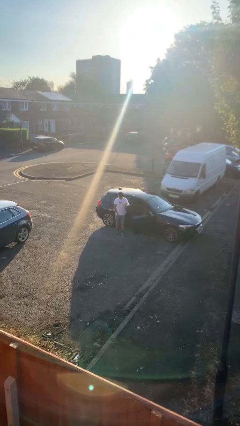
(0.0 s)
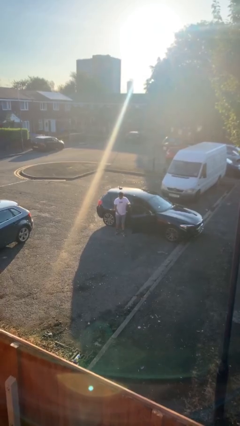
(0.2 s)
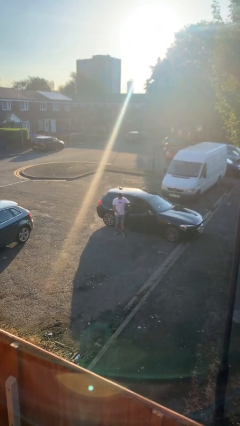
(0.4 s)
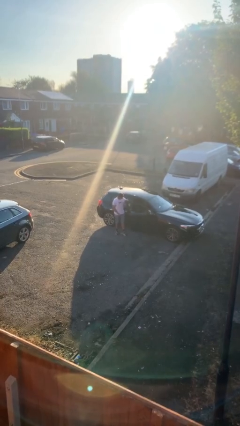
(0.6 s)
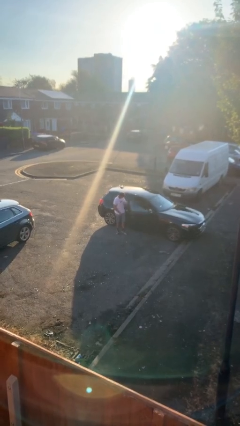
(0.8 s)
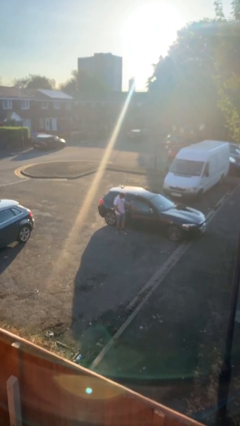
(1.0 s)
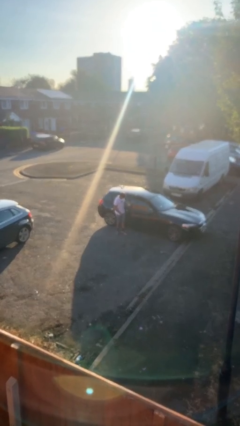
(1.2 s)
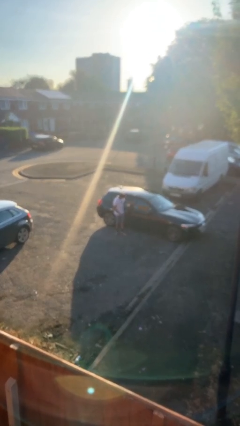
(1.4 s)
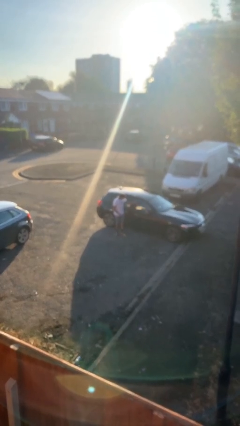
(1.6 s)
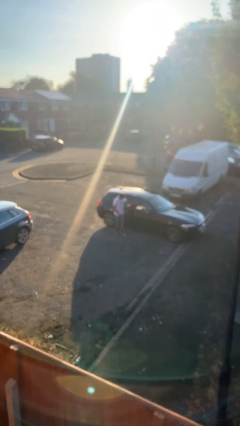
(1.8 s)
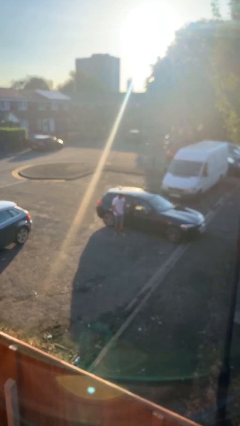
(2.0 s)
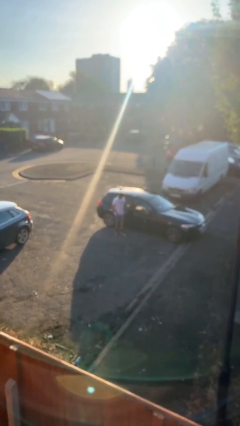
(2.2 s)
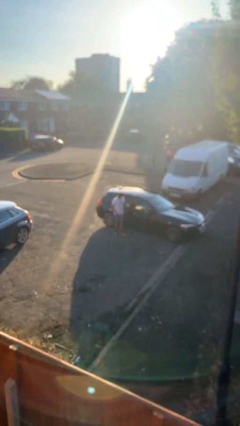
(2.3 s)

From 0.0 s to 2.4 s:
person closes car door

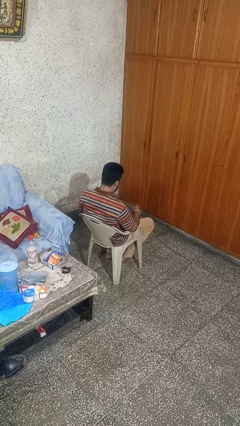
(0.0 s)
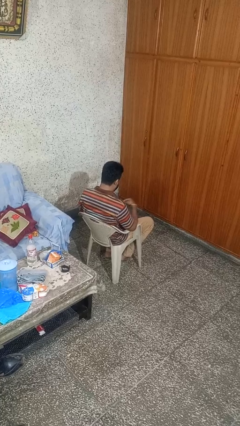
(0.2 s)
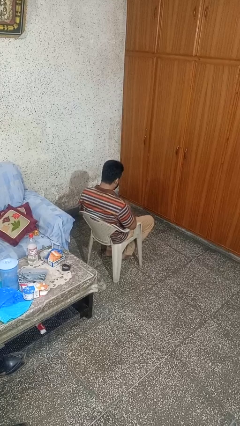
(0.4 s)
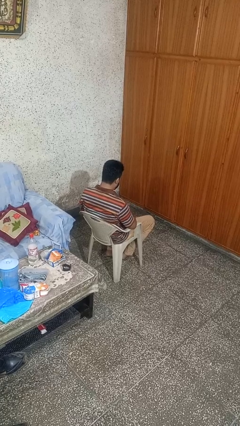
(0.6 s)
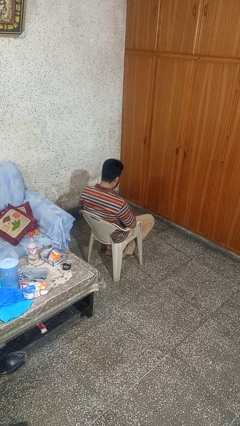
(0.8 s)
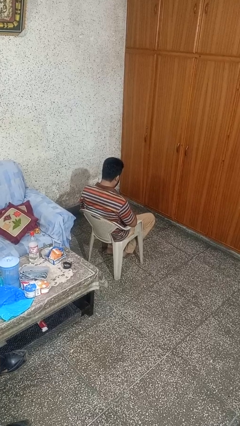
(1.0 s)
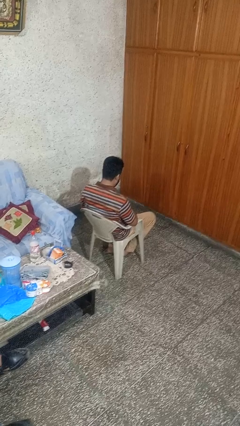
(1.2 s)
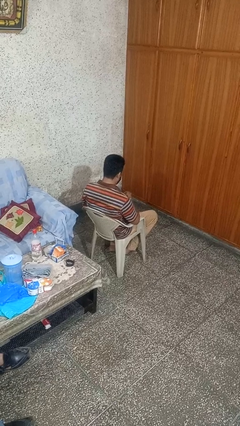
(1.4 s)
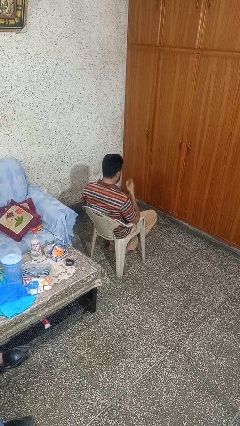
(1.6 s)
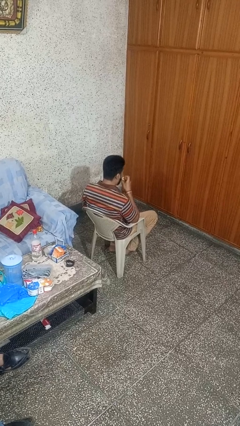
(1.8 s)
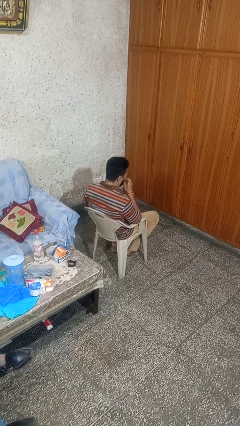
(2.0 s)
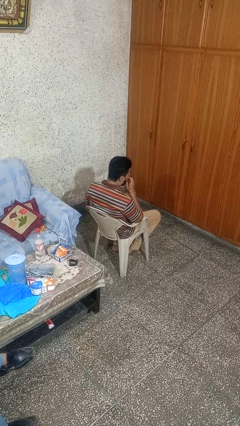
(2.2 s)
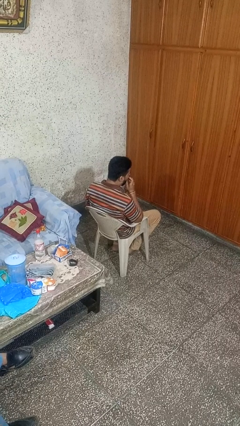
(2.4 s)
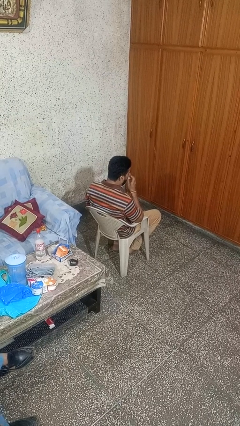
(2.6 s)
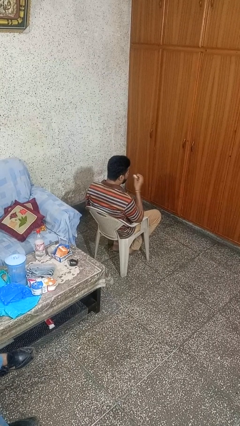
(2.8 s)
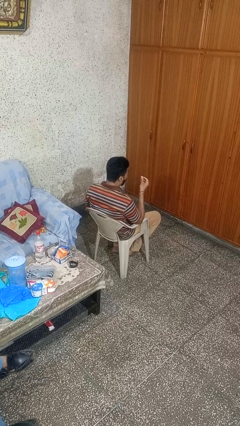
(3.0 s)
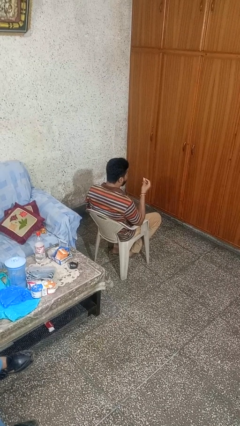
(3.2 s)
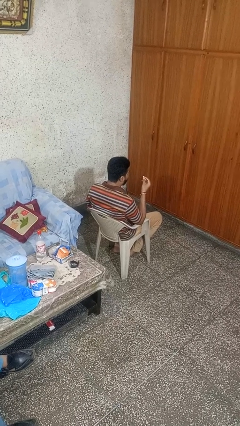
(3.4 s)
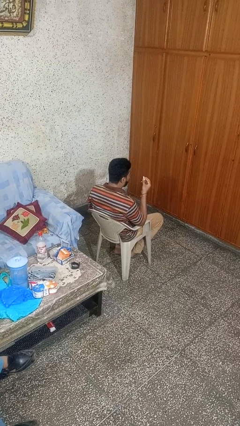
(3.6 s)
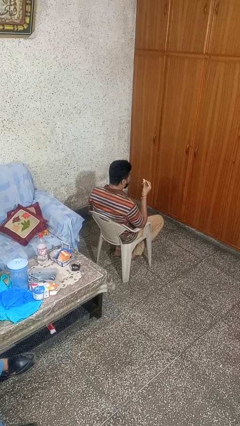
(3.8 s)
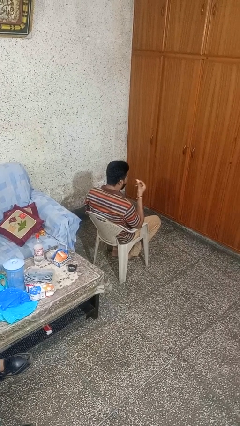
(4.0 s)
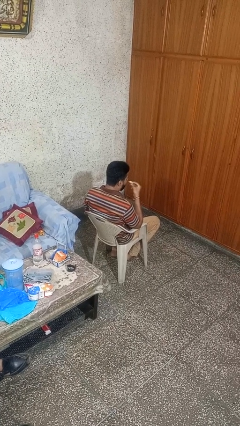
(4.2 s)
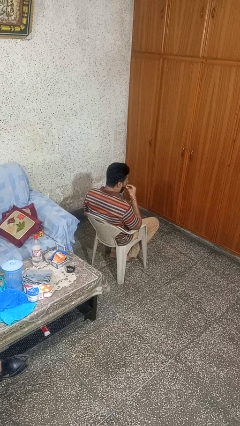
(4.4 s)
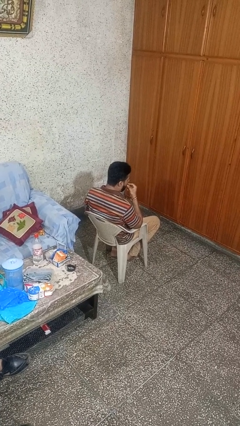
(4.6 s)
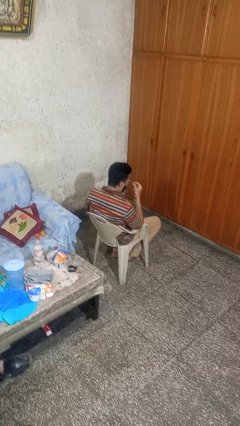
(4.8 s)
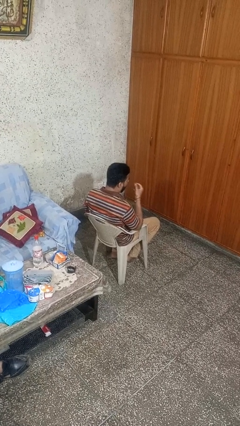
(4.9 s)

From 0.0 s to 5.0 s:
person eats snack from bag

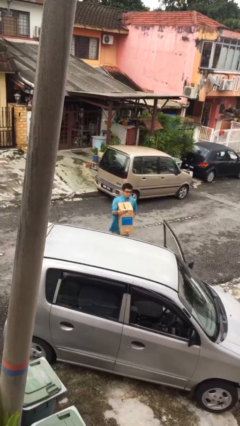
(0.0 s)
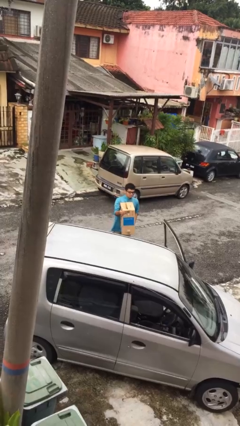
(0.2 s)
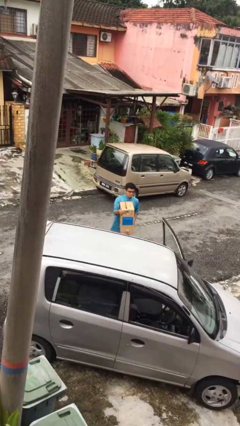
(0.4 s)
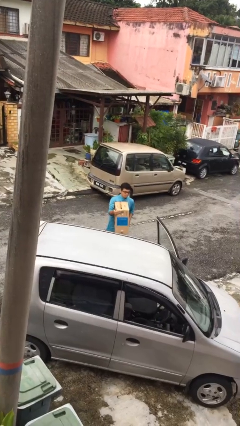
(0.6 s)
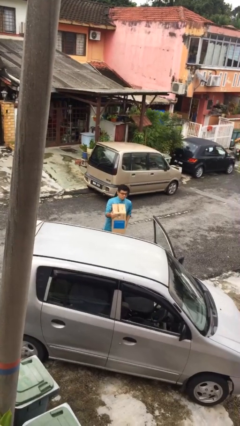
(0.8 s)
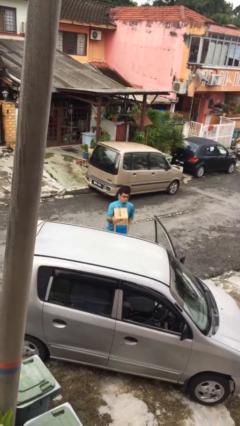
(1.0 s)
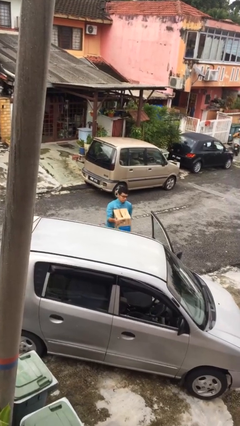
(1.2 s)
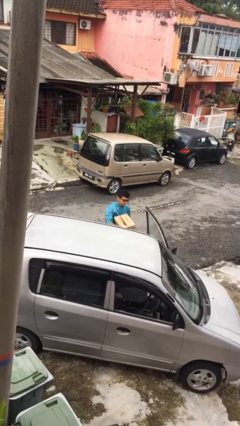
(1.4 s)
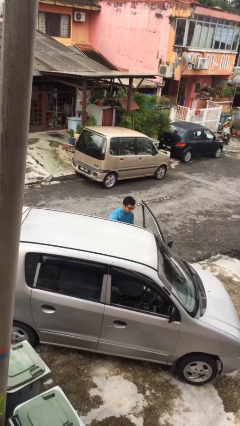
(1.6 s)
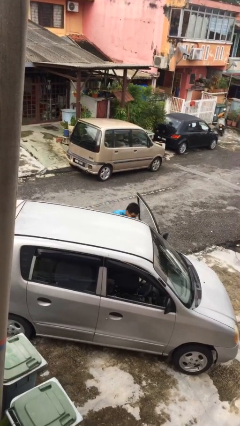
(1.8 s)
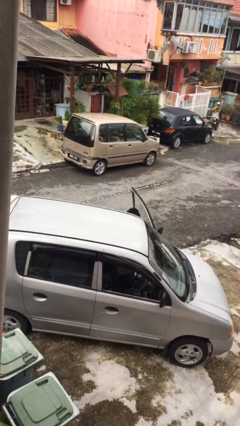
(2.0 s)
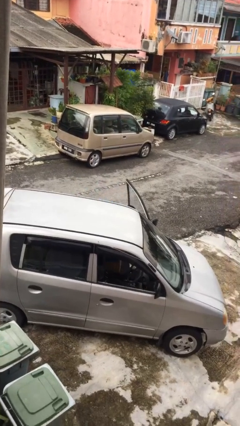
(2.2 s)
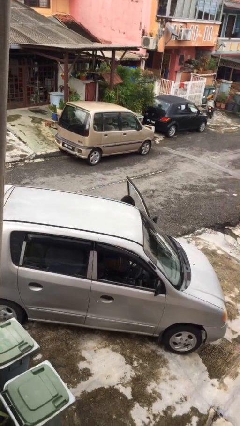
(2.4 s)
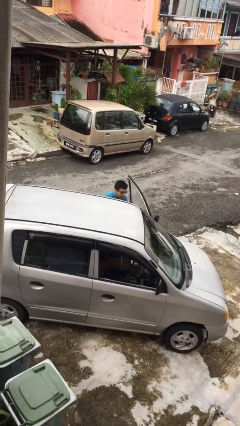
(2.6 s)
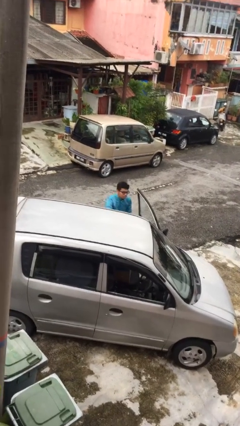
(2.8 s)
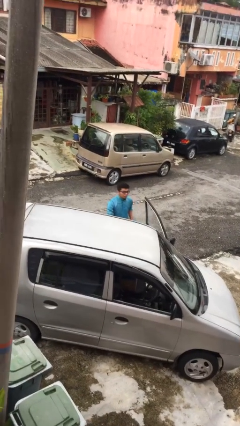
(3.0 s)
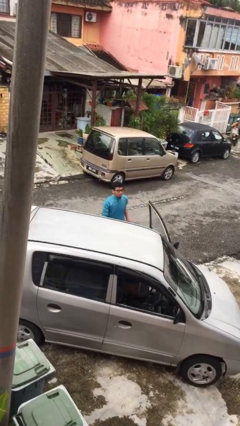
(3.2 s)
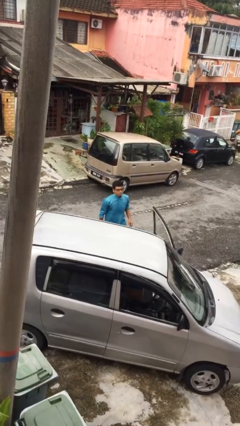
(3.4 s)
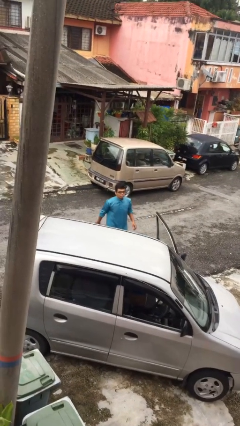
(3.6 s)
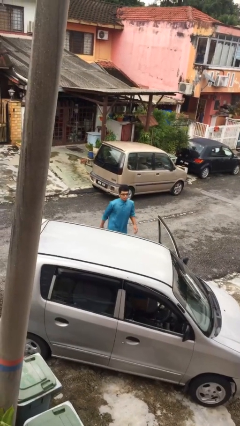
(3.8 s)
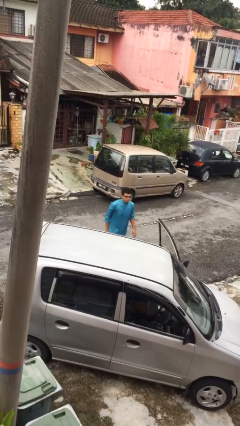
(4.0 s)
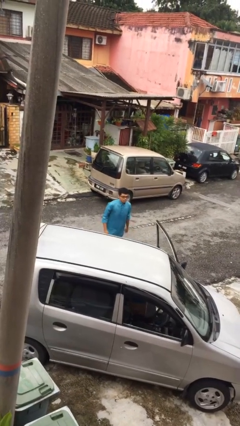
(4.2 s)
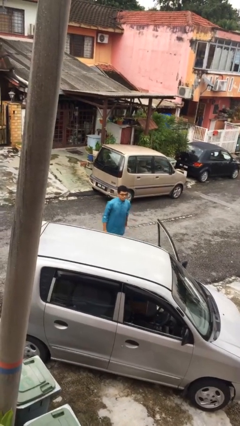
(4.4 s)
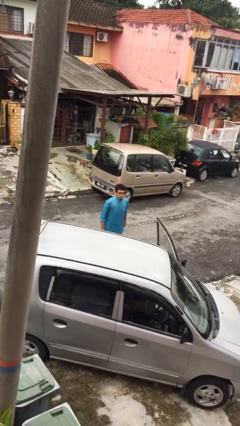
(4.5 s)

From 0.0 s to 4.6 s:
person loads car

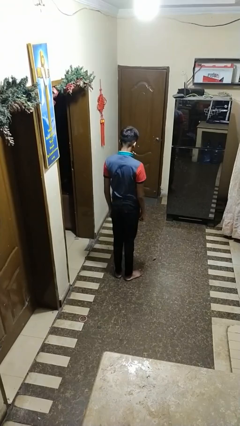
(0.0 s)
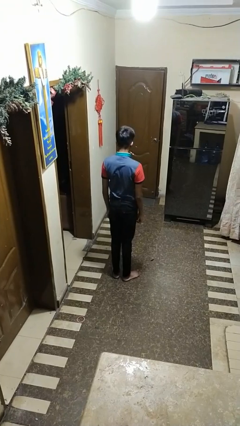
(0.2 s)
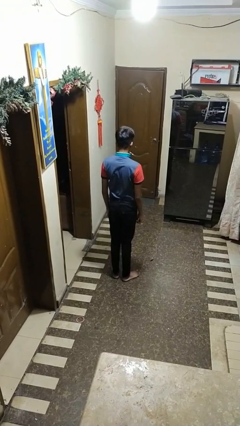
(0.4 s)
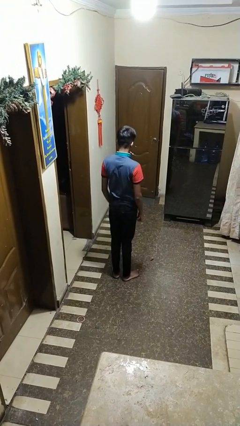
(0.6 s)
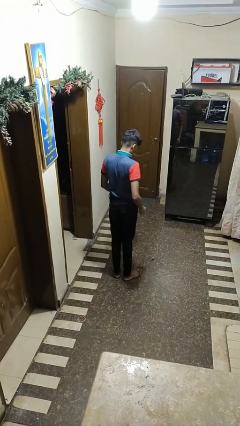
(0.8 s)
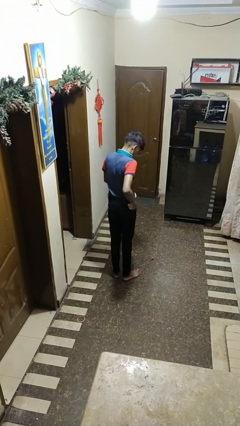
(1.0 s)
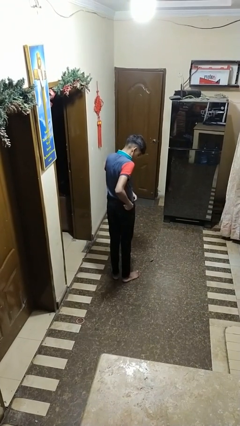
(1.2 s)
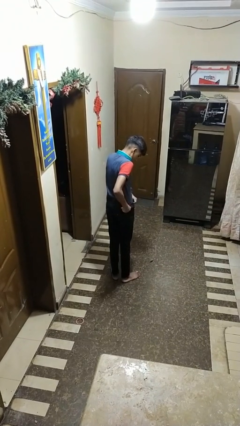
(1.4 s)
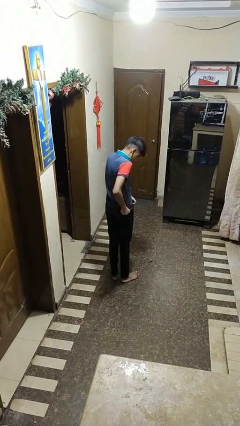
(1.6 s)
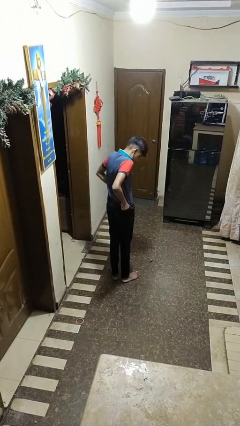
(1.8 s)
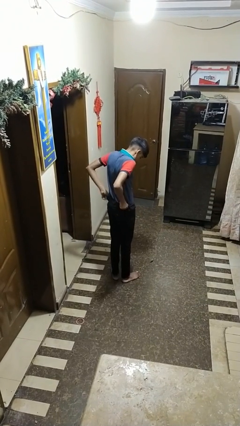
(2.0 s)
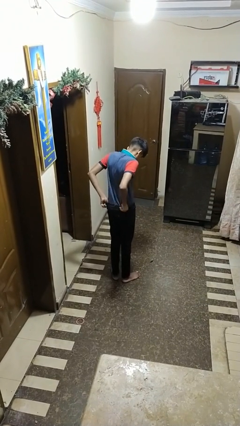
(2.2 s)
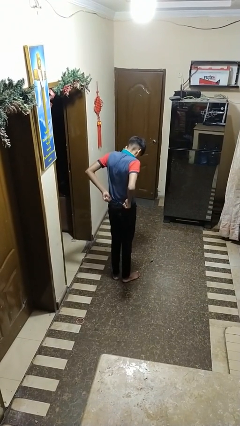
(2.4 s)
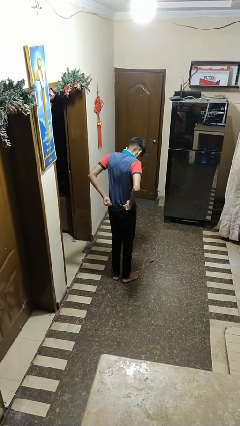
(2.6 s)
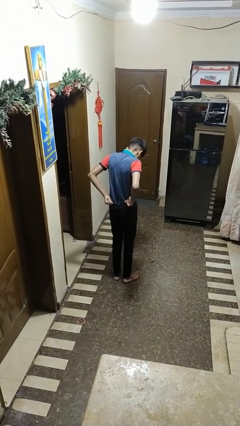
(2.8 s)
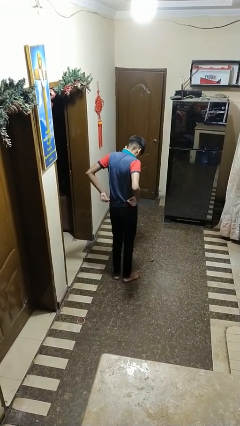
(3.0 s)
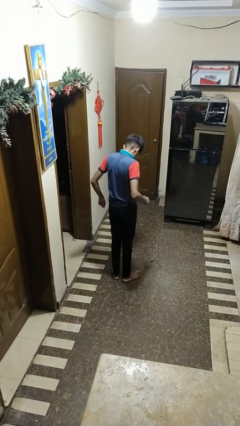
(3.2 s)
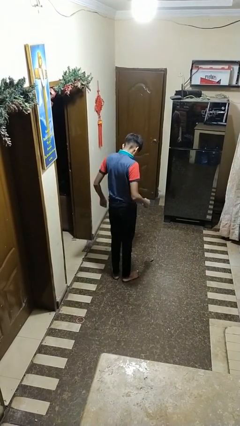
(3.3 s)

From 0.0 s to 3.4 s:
person hikes up pants

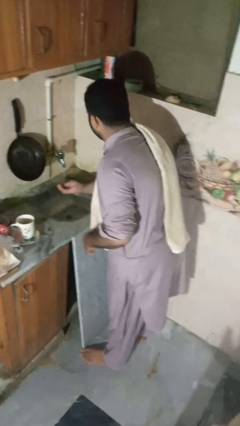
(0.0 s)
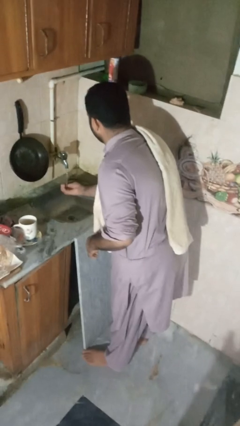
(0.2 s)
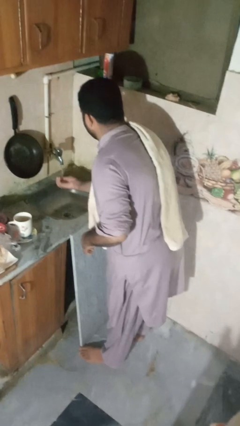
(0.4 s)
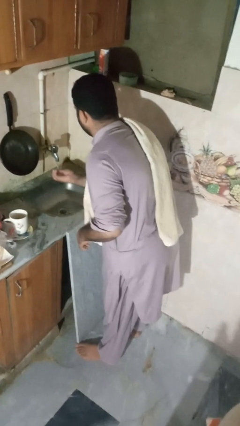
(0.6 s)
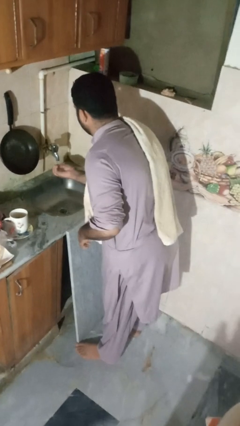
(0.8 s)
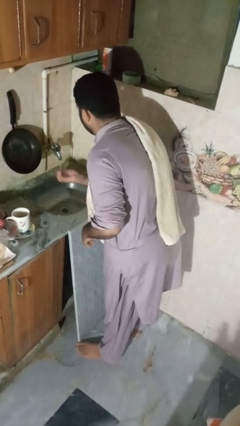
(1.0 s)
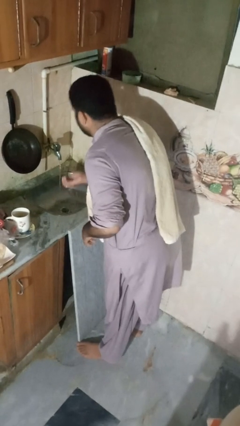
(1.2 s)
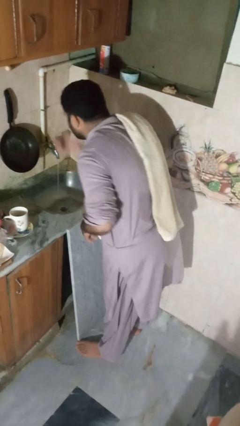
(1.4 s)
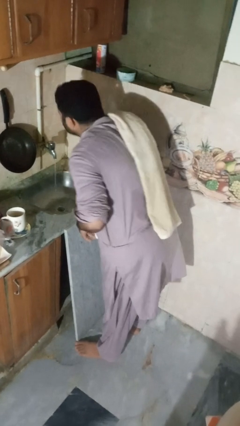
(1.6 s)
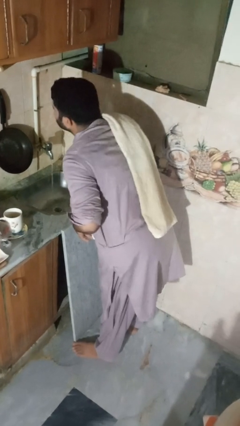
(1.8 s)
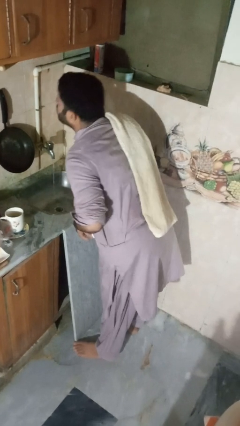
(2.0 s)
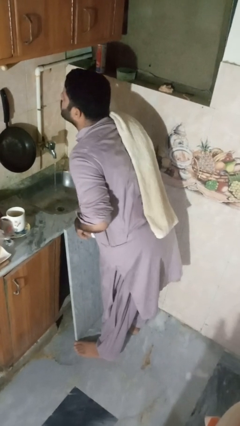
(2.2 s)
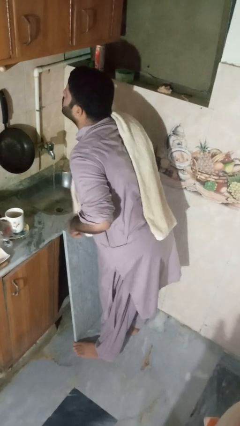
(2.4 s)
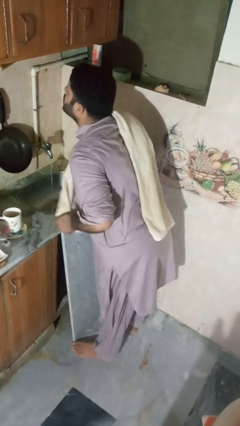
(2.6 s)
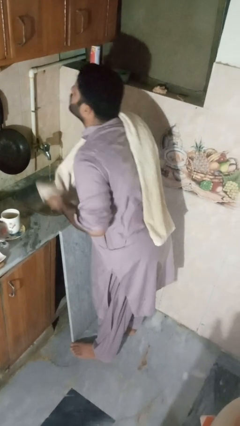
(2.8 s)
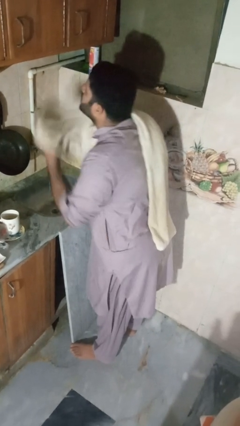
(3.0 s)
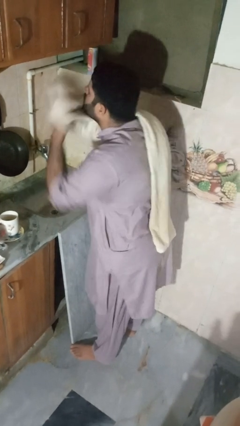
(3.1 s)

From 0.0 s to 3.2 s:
person washes face
